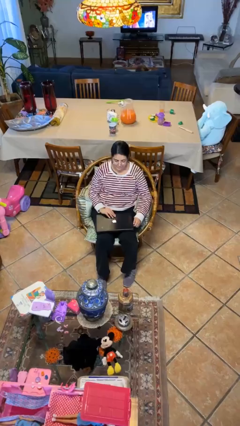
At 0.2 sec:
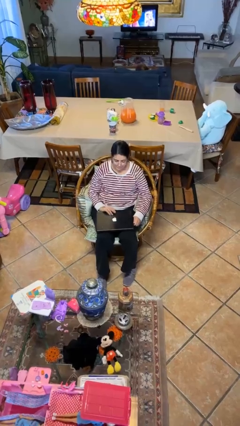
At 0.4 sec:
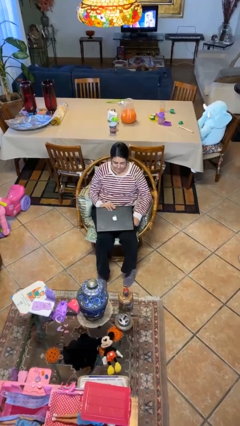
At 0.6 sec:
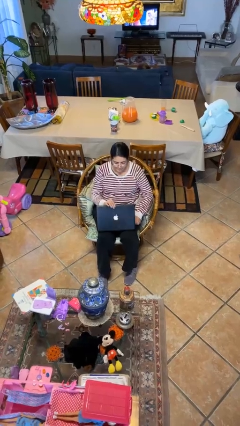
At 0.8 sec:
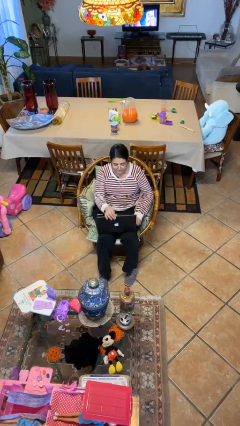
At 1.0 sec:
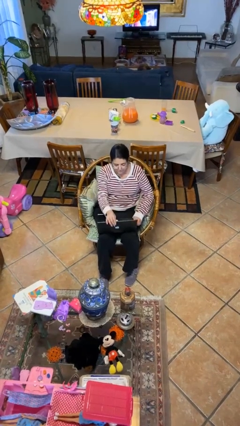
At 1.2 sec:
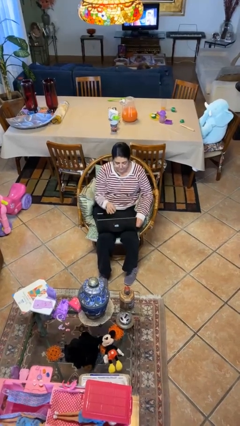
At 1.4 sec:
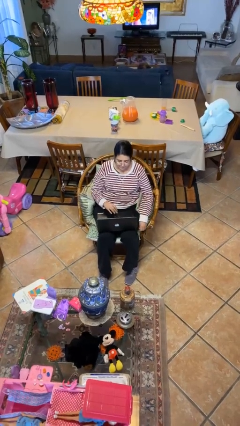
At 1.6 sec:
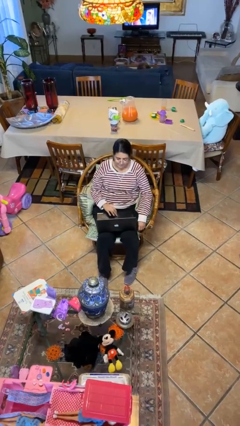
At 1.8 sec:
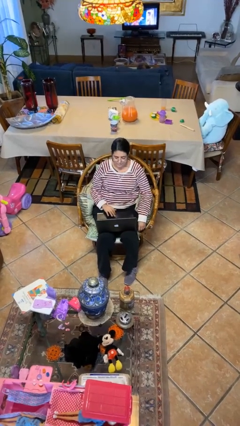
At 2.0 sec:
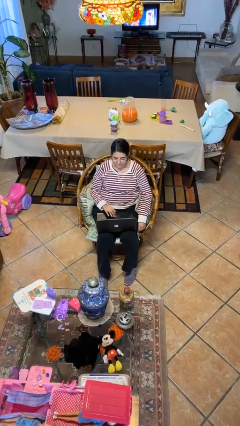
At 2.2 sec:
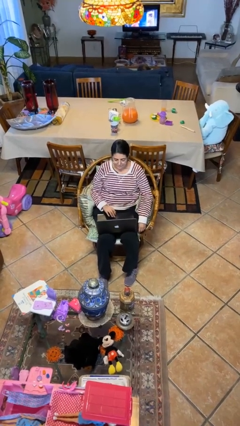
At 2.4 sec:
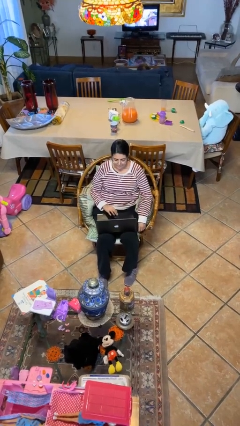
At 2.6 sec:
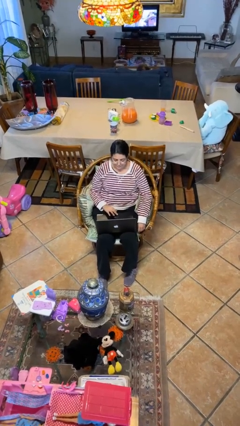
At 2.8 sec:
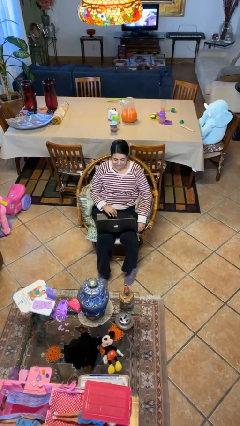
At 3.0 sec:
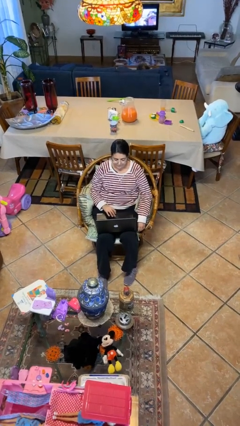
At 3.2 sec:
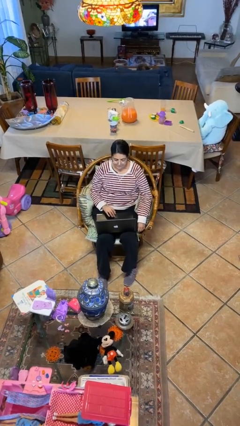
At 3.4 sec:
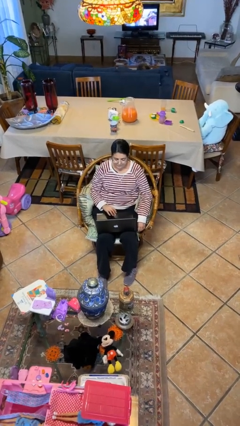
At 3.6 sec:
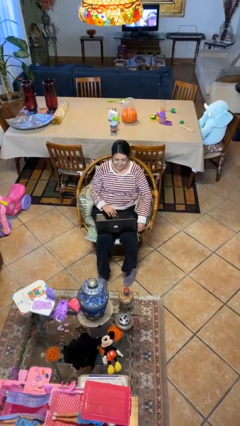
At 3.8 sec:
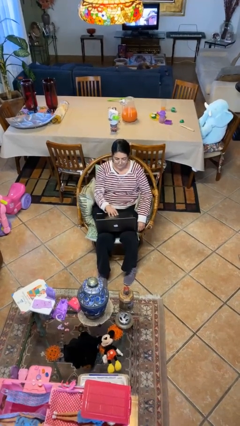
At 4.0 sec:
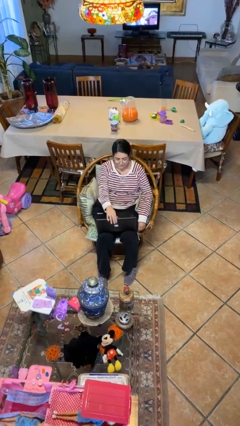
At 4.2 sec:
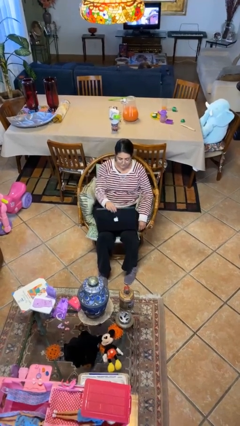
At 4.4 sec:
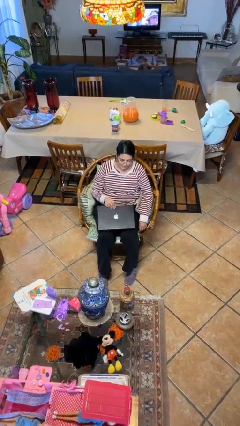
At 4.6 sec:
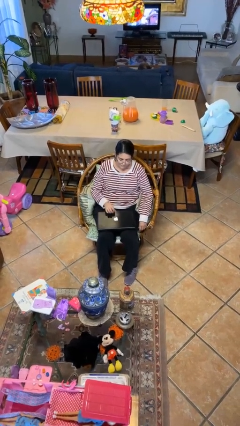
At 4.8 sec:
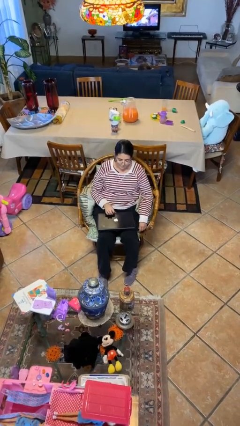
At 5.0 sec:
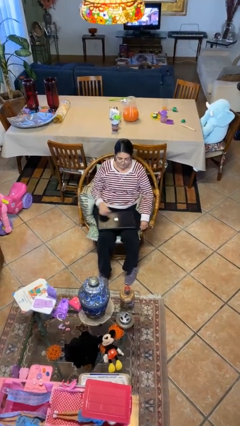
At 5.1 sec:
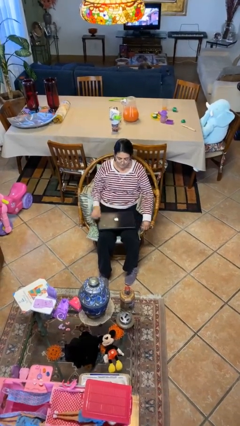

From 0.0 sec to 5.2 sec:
person interacts with laptop

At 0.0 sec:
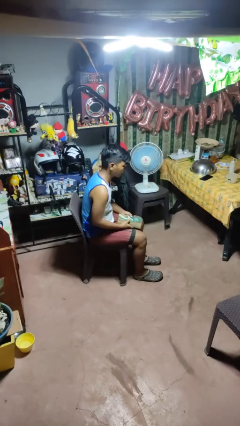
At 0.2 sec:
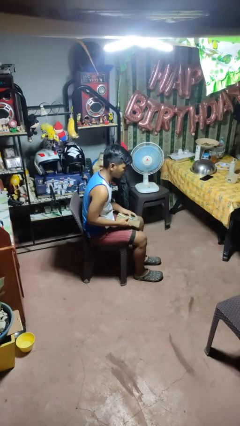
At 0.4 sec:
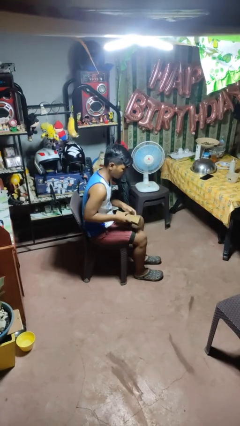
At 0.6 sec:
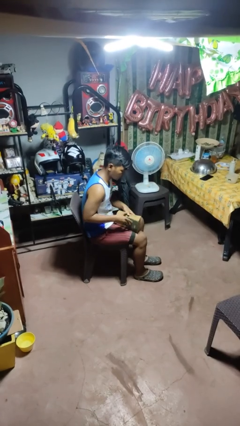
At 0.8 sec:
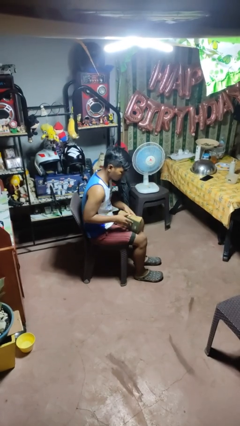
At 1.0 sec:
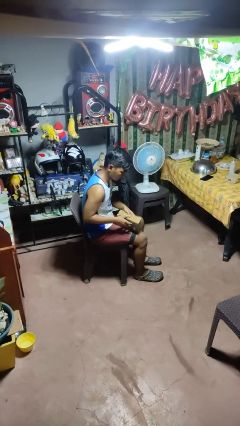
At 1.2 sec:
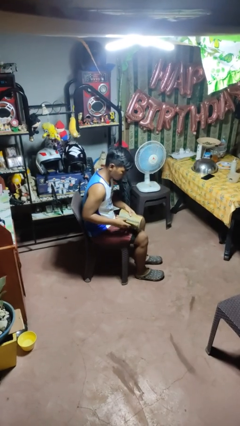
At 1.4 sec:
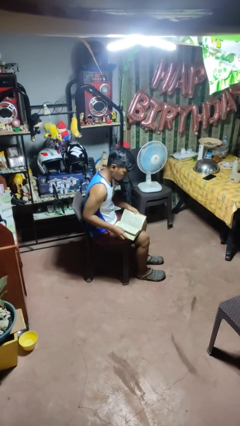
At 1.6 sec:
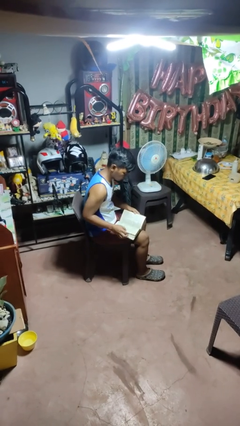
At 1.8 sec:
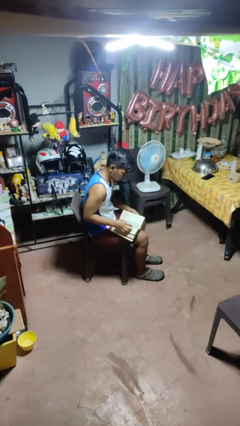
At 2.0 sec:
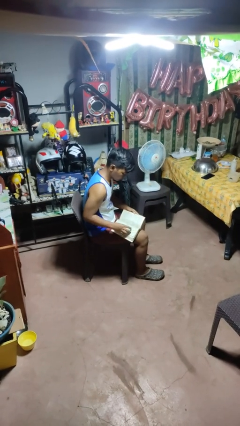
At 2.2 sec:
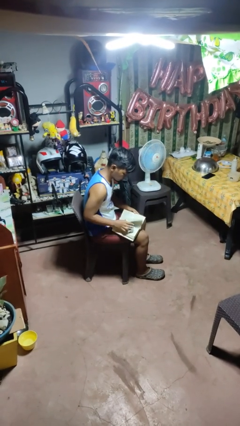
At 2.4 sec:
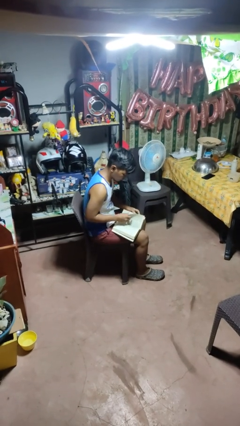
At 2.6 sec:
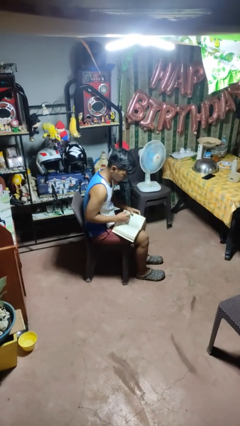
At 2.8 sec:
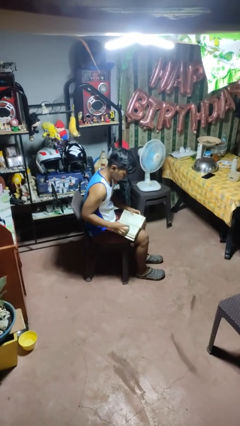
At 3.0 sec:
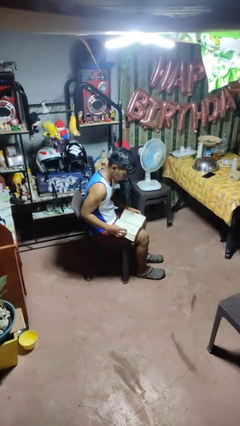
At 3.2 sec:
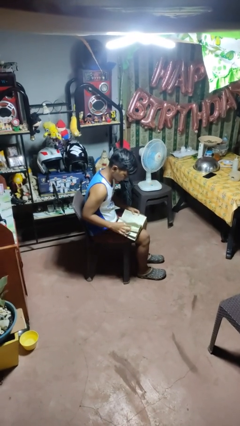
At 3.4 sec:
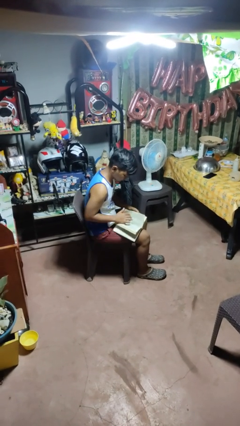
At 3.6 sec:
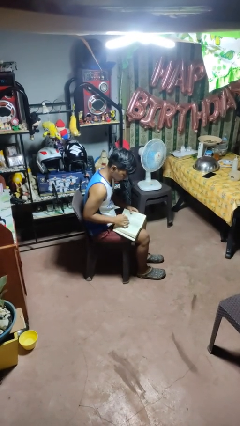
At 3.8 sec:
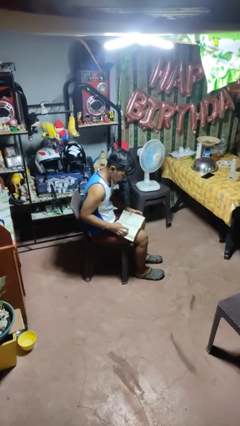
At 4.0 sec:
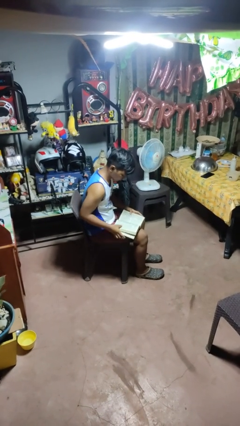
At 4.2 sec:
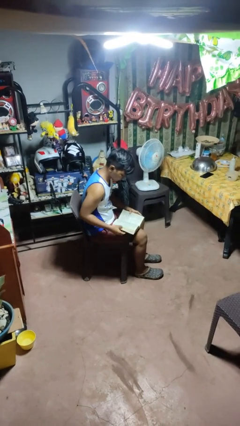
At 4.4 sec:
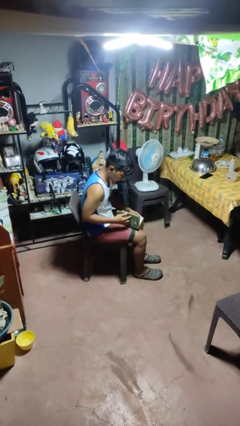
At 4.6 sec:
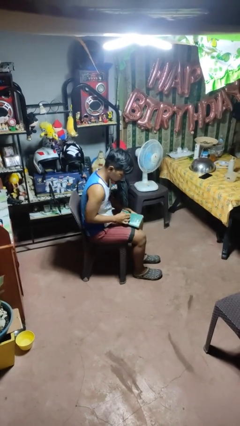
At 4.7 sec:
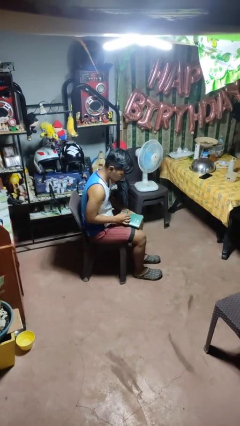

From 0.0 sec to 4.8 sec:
person reads book

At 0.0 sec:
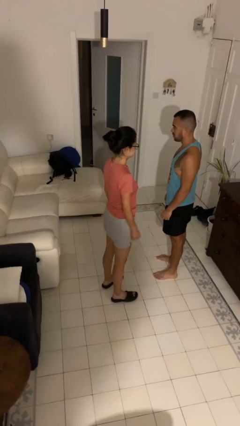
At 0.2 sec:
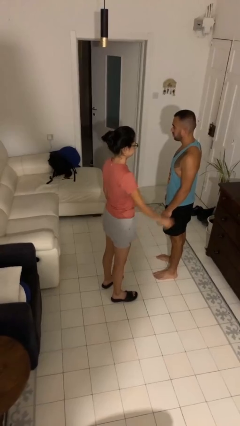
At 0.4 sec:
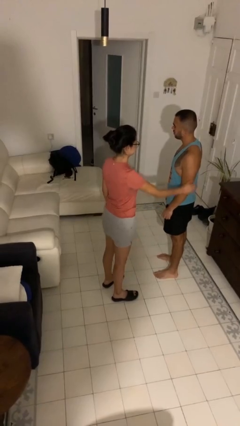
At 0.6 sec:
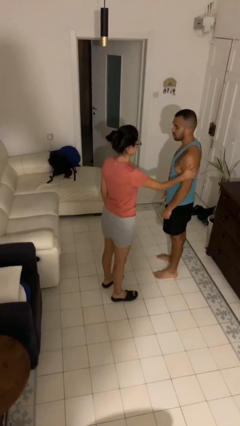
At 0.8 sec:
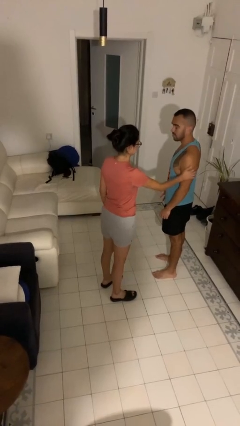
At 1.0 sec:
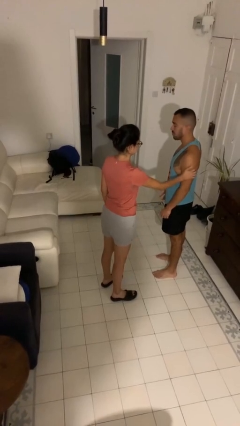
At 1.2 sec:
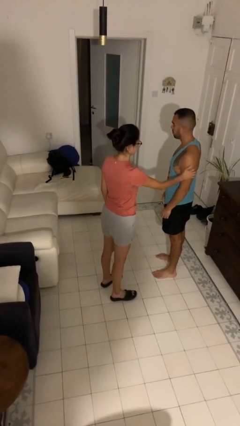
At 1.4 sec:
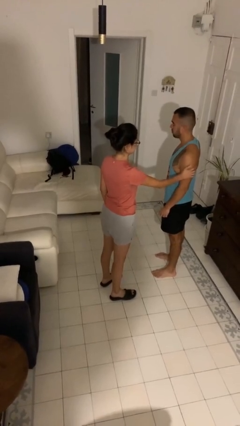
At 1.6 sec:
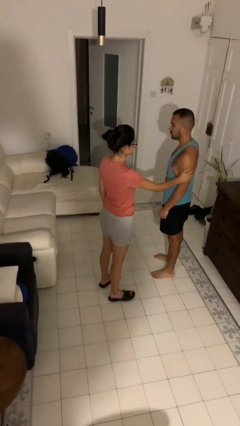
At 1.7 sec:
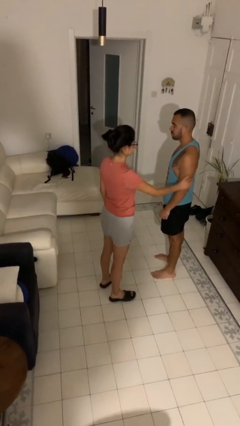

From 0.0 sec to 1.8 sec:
person grabs person by bicep

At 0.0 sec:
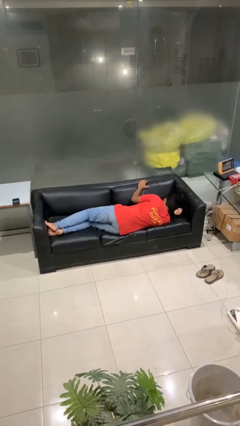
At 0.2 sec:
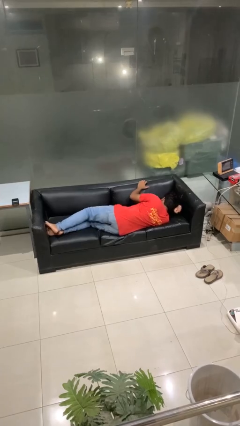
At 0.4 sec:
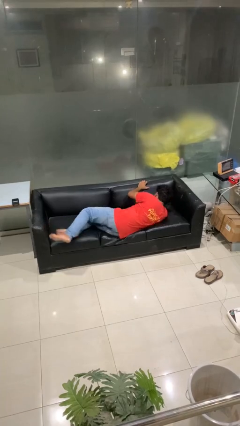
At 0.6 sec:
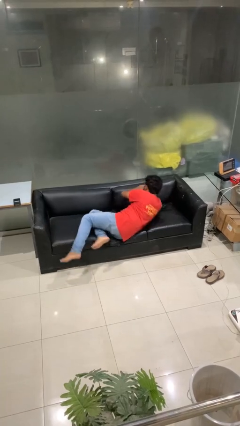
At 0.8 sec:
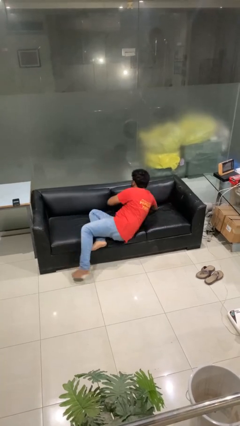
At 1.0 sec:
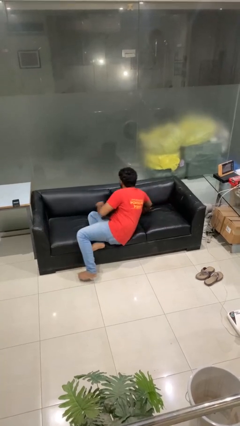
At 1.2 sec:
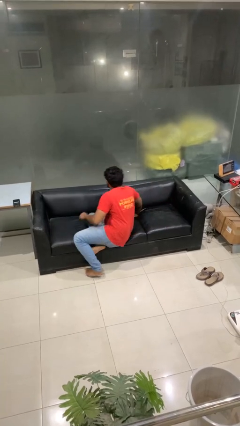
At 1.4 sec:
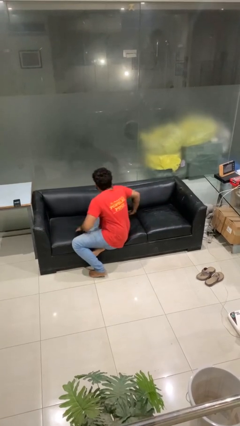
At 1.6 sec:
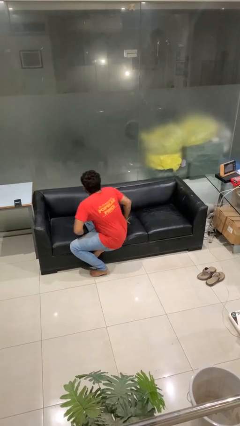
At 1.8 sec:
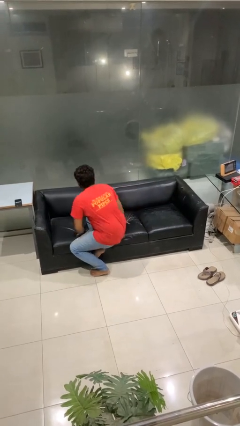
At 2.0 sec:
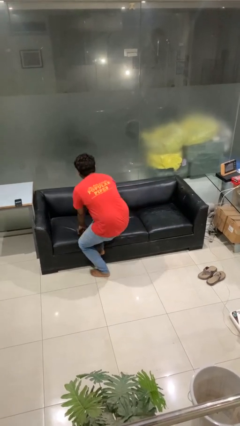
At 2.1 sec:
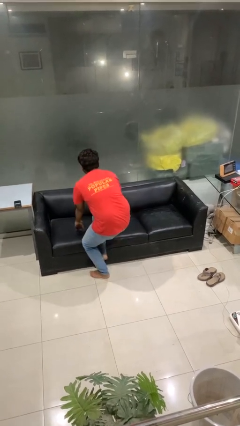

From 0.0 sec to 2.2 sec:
person stands up

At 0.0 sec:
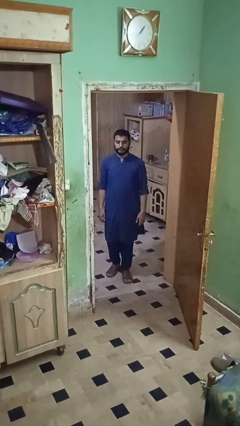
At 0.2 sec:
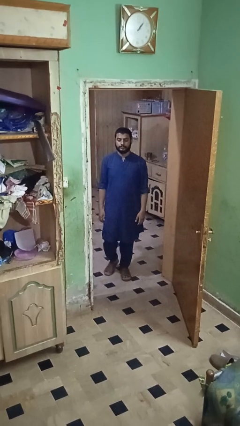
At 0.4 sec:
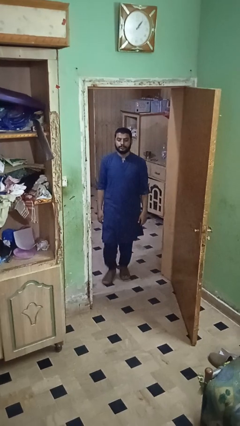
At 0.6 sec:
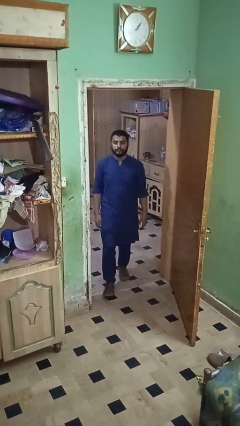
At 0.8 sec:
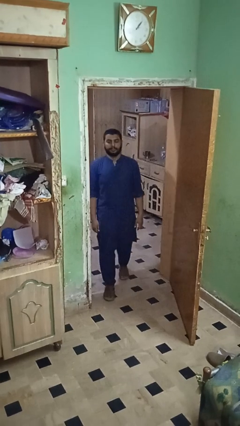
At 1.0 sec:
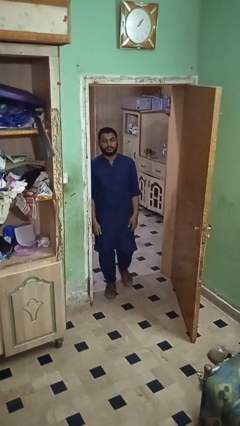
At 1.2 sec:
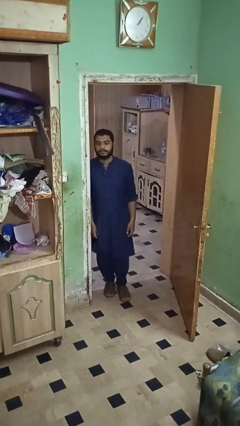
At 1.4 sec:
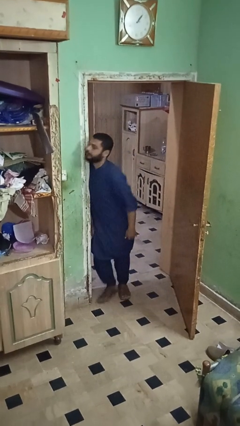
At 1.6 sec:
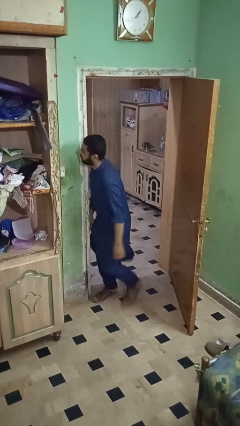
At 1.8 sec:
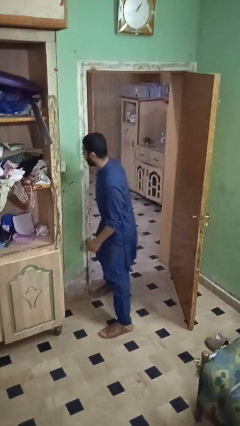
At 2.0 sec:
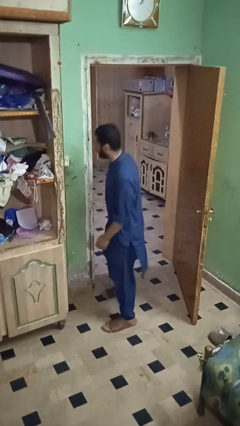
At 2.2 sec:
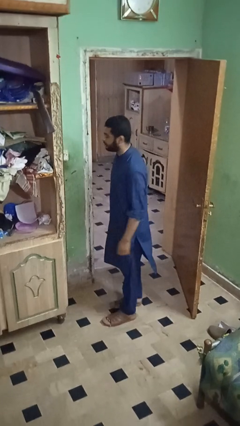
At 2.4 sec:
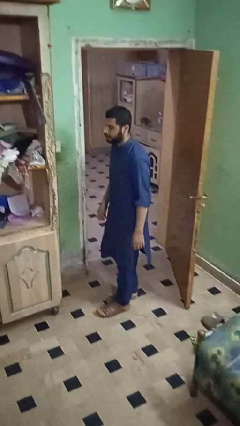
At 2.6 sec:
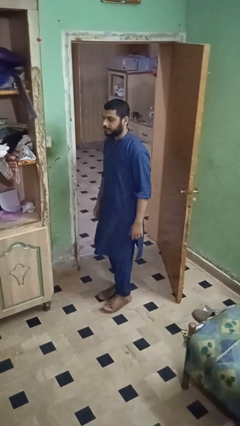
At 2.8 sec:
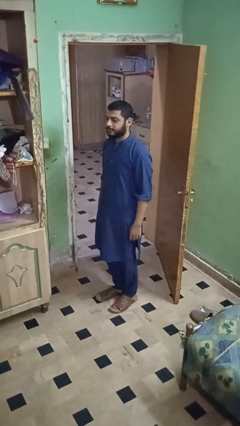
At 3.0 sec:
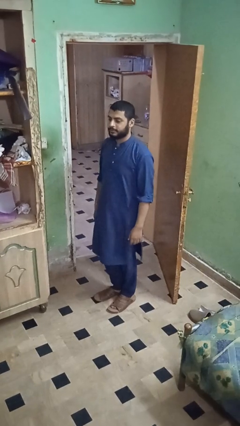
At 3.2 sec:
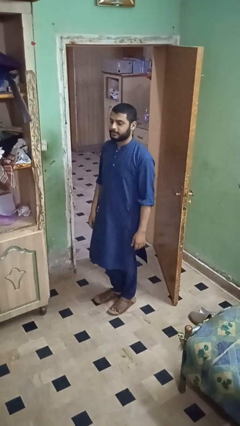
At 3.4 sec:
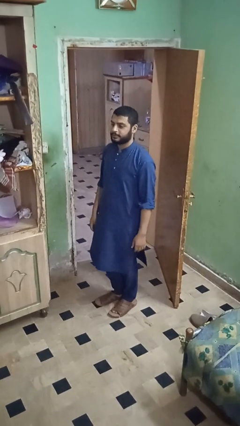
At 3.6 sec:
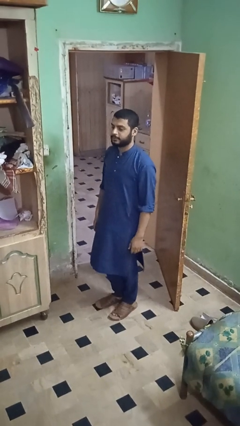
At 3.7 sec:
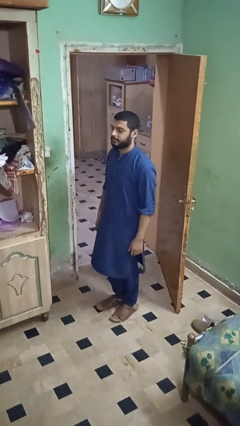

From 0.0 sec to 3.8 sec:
person bumps into wall
